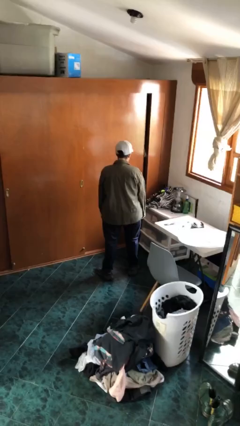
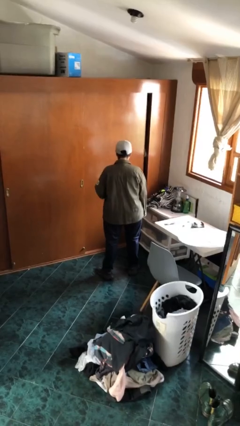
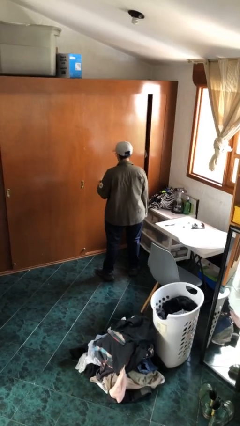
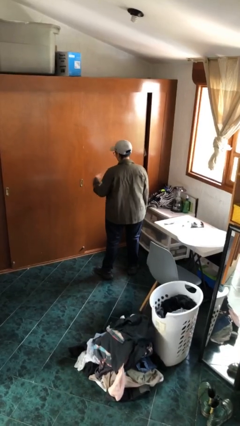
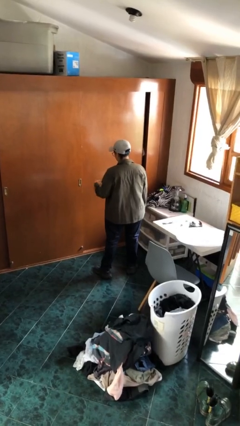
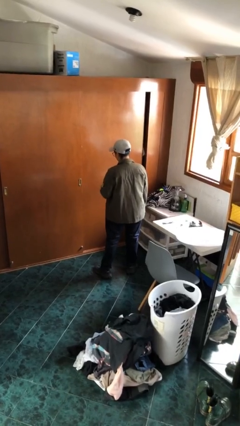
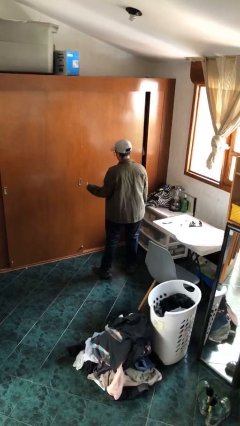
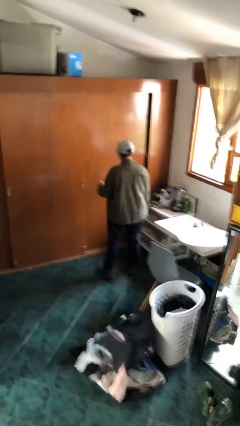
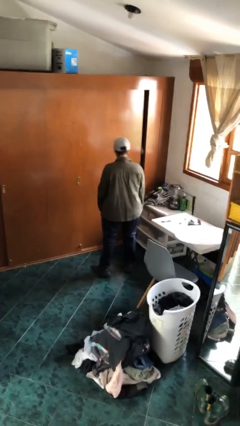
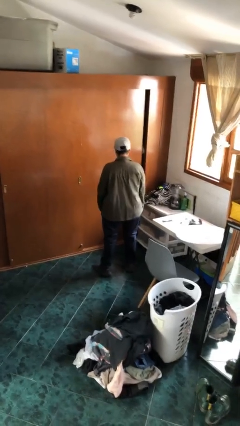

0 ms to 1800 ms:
person snaps fingers

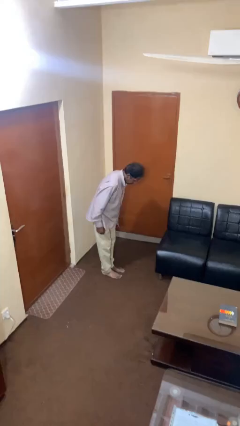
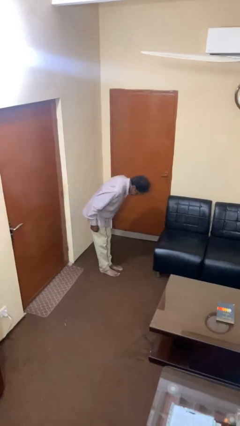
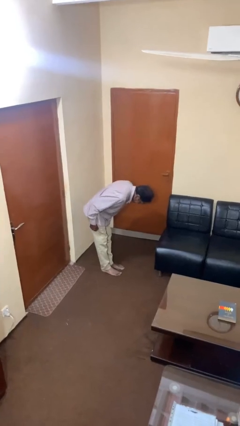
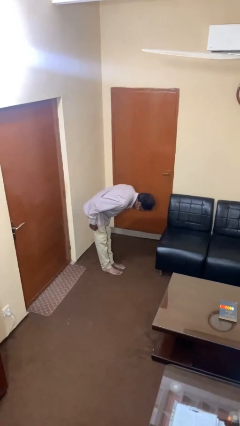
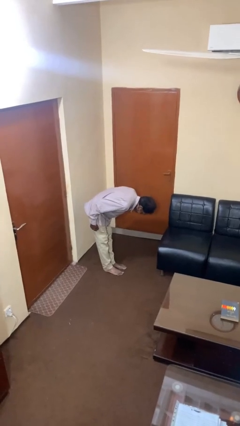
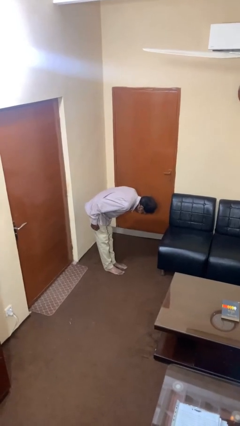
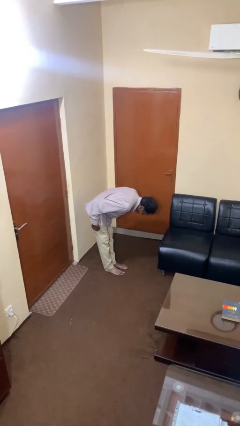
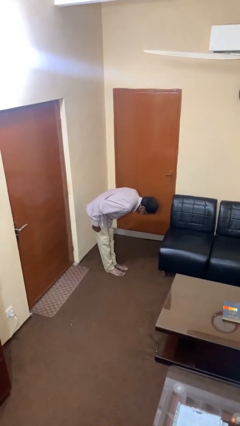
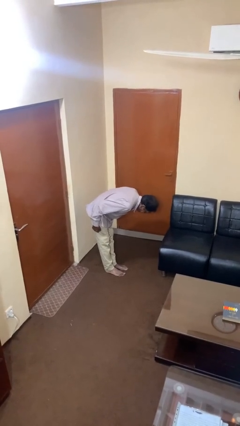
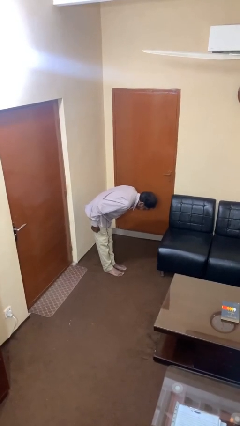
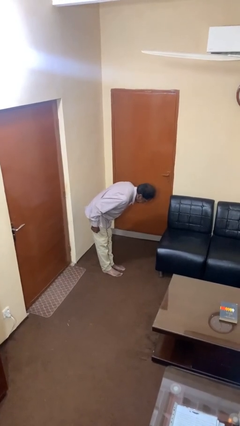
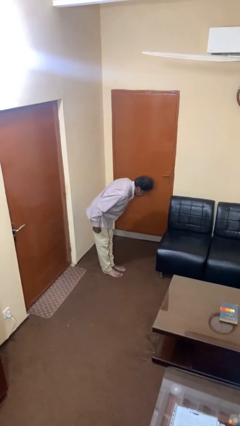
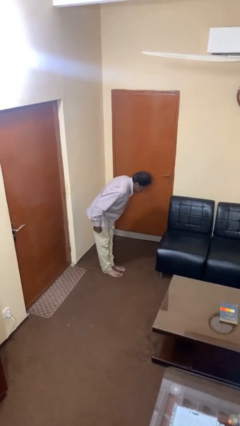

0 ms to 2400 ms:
person bows

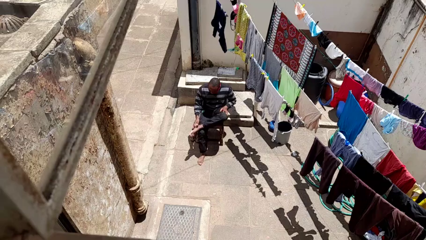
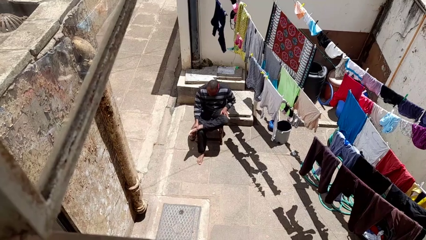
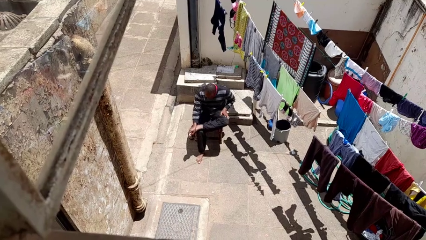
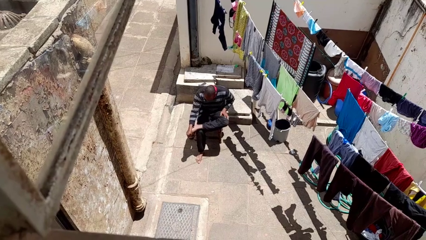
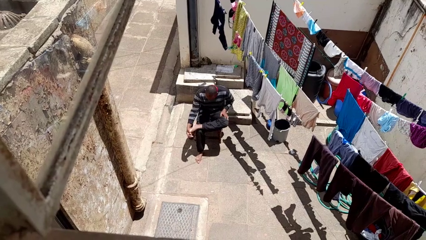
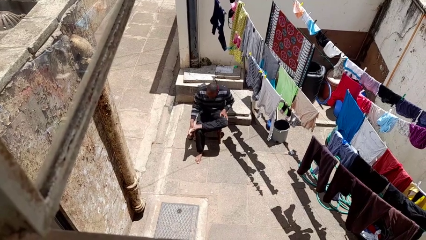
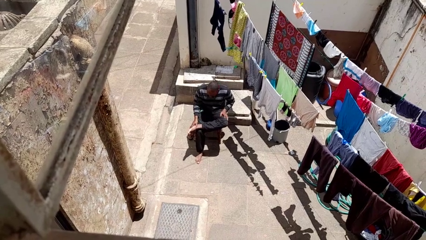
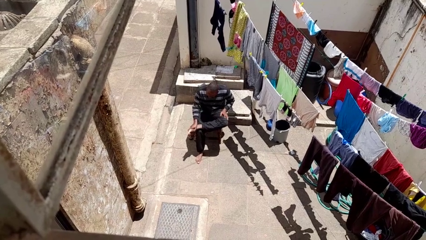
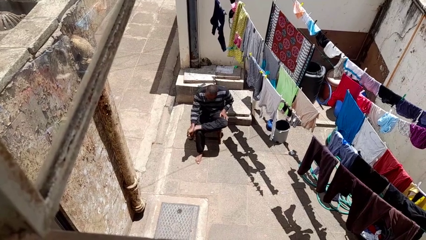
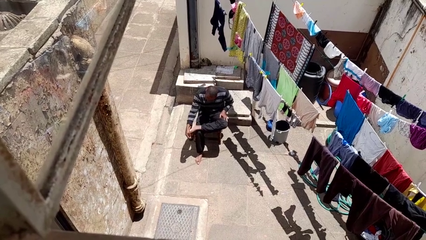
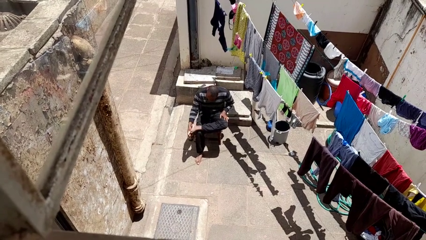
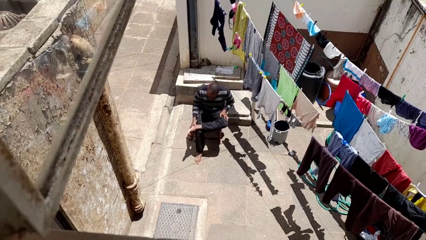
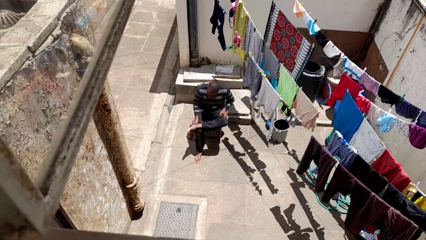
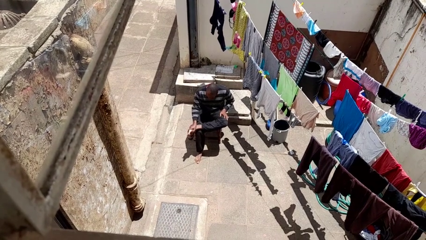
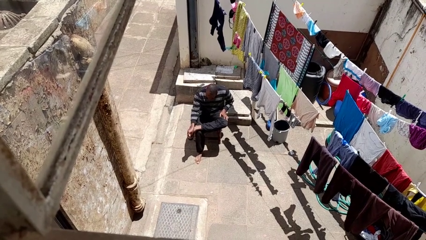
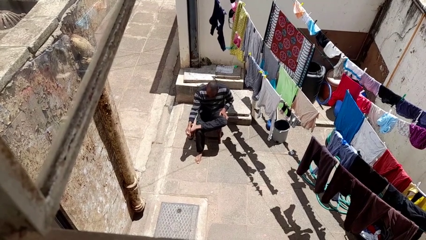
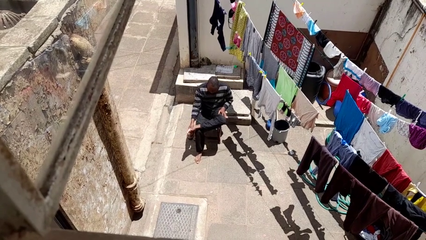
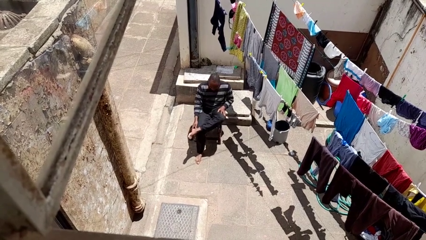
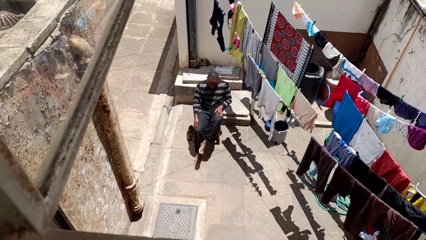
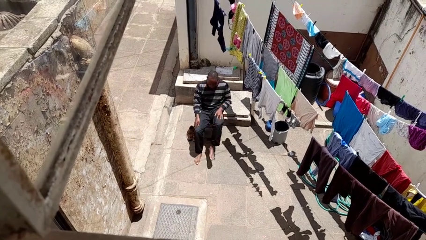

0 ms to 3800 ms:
person rubs foot

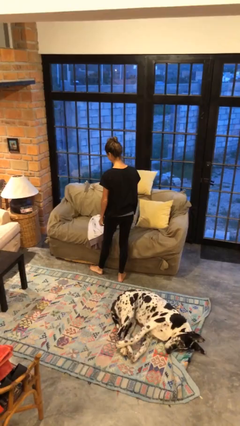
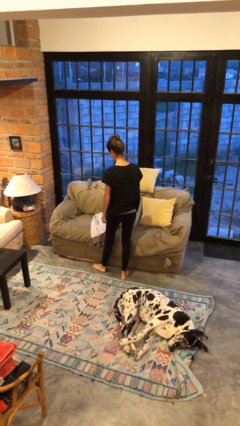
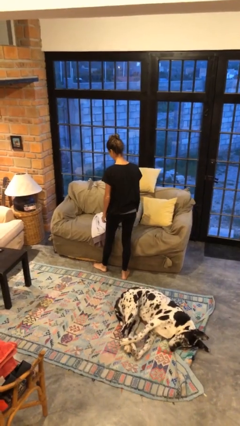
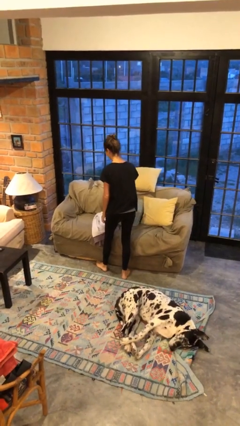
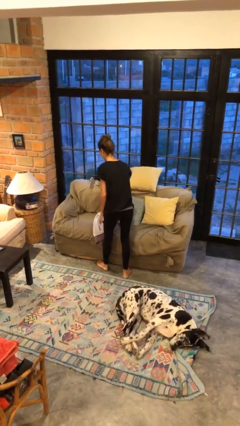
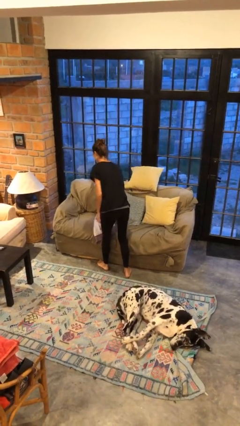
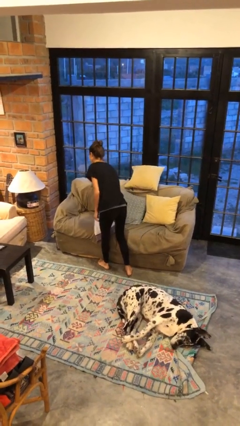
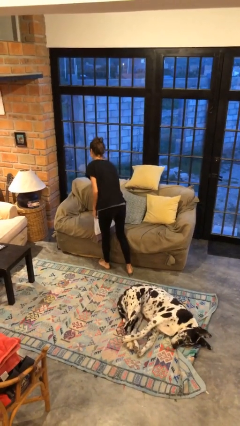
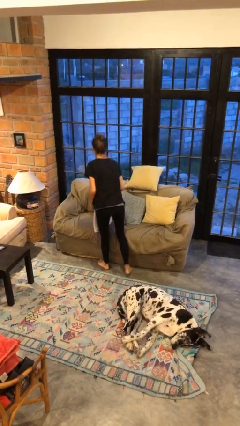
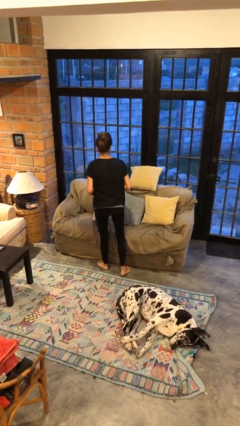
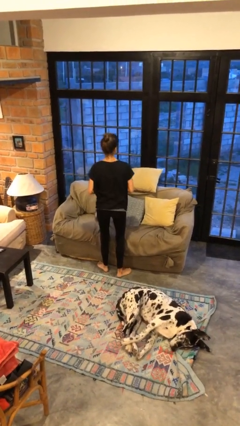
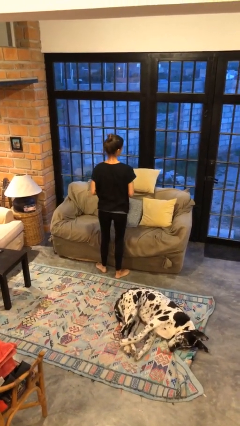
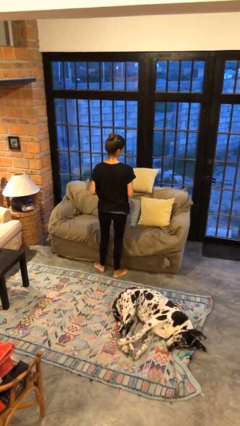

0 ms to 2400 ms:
person picks up object from couch

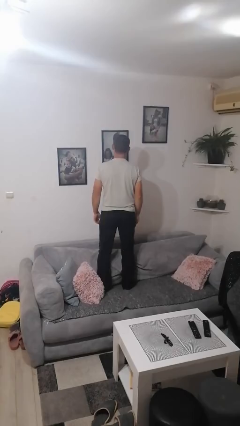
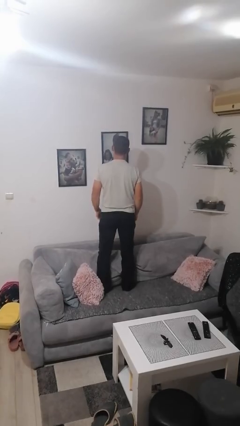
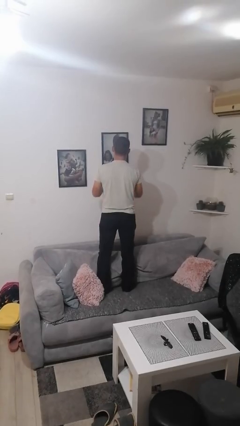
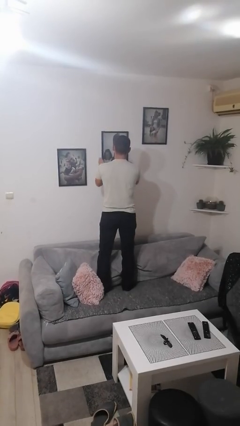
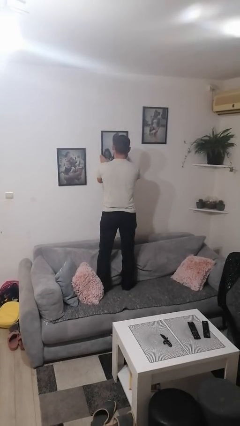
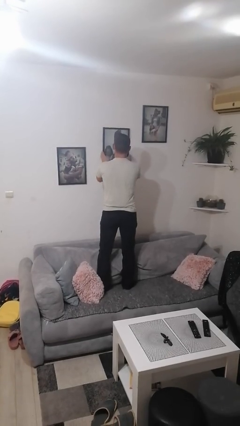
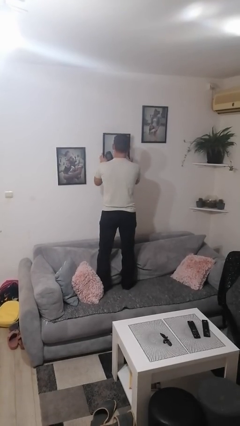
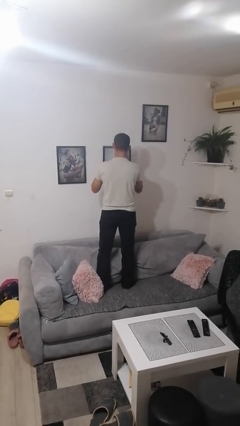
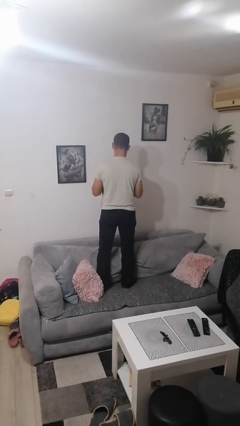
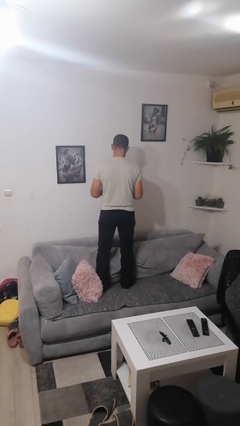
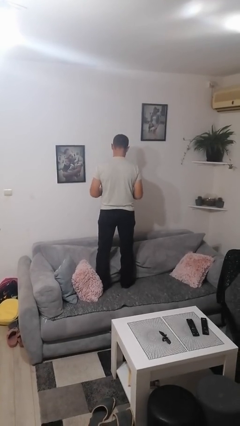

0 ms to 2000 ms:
person takes down picture frame

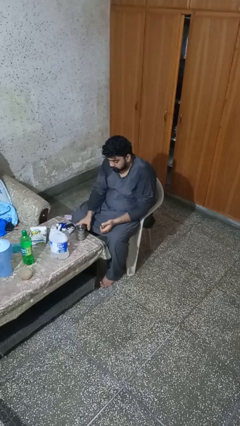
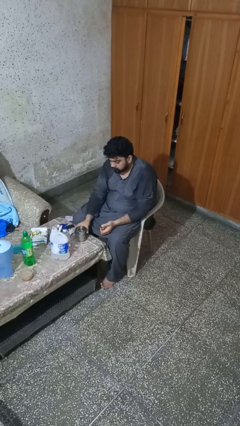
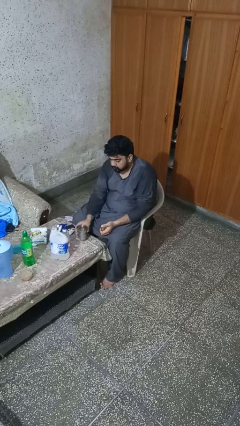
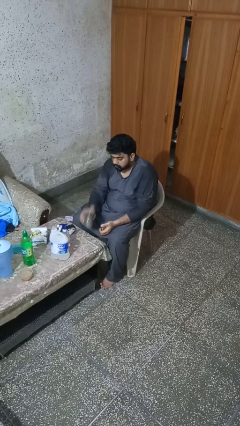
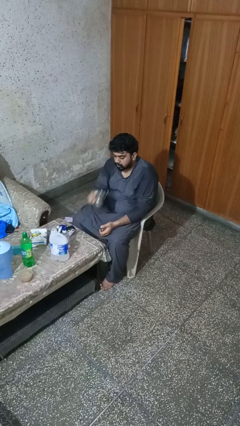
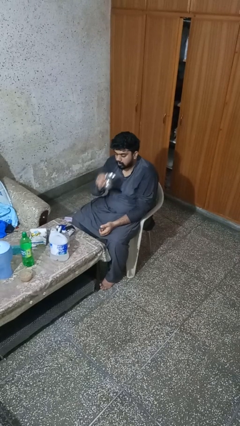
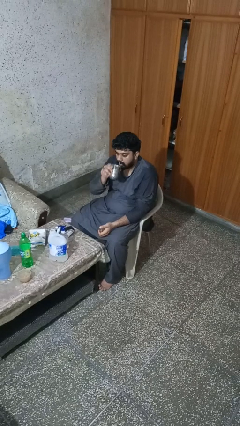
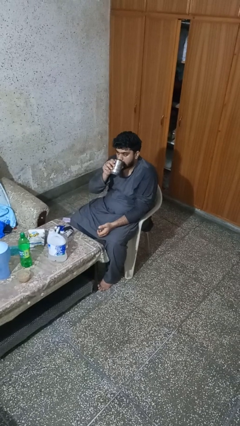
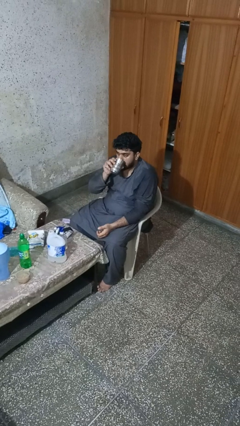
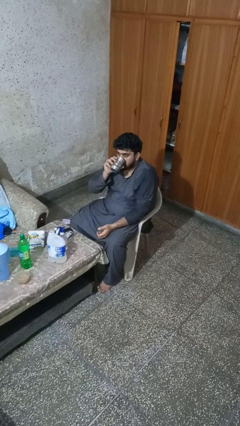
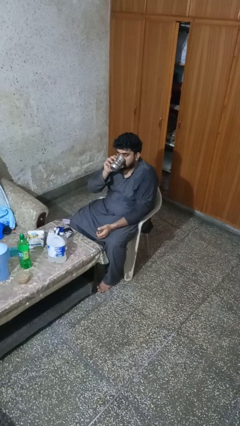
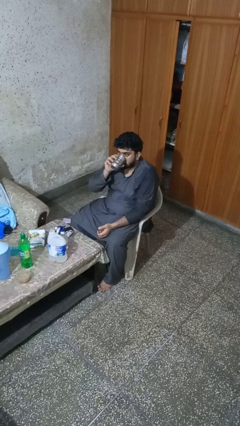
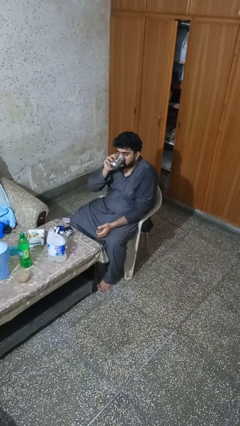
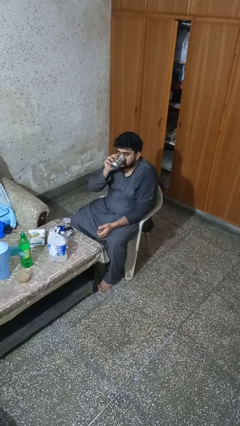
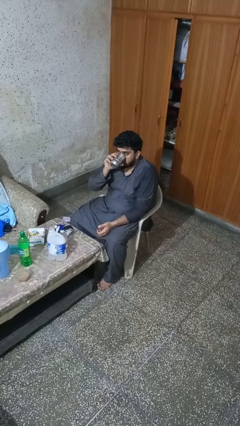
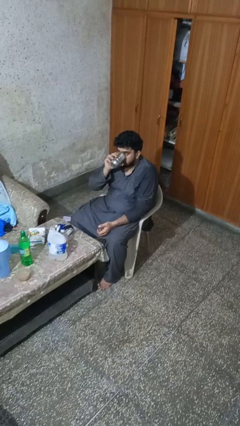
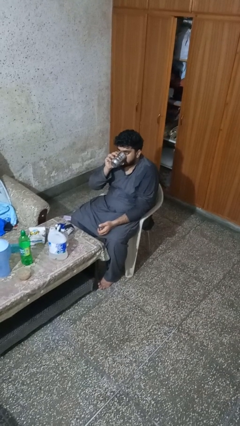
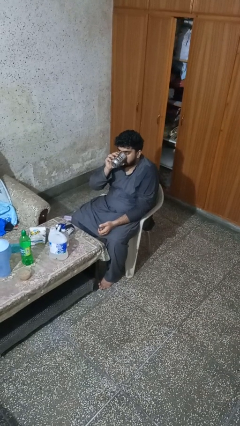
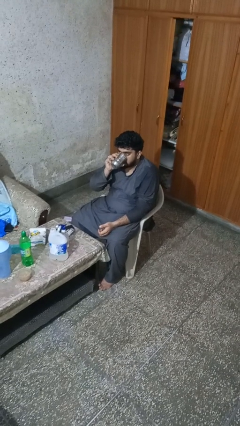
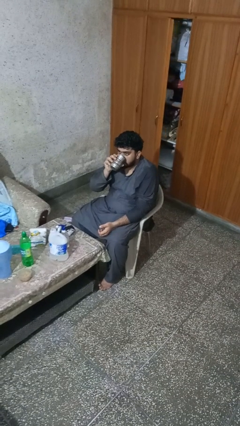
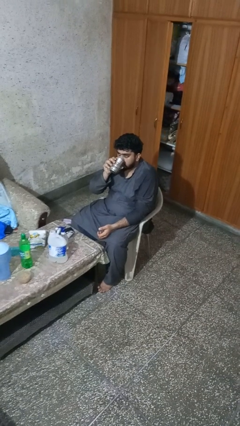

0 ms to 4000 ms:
person drinks from cup

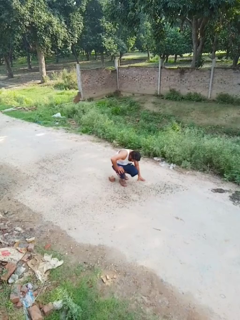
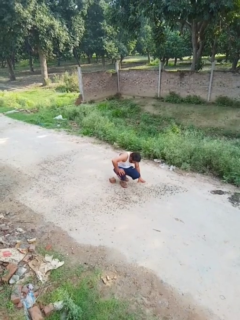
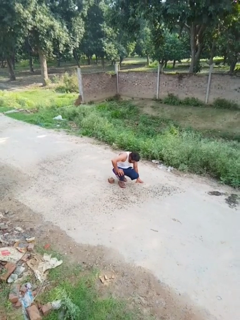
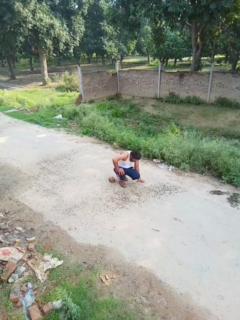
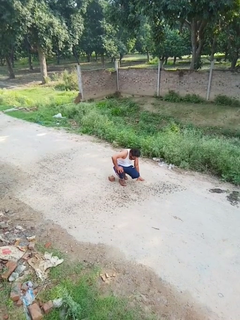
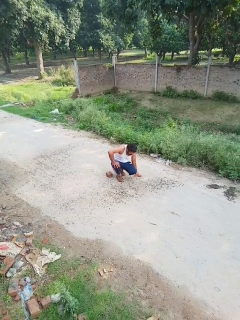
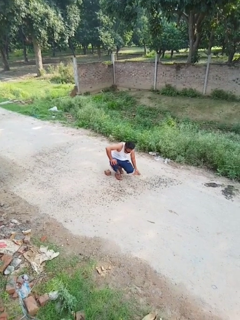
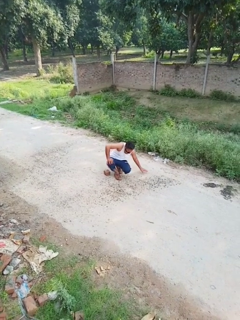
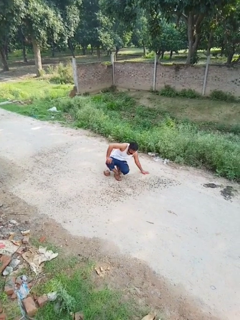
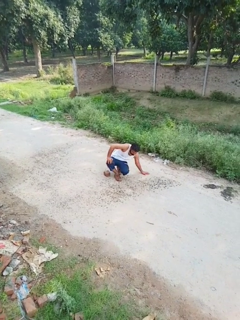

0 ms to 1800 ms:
person lies down on floor
